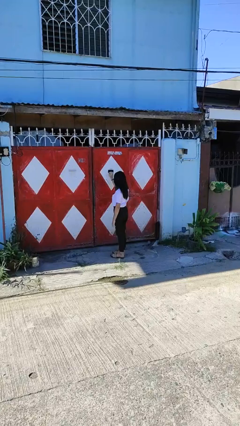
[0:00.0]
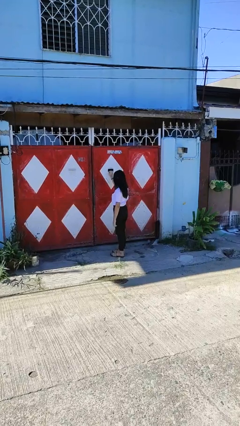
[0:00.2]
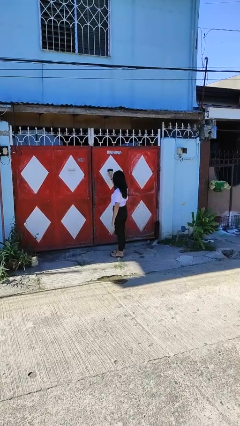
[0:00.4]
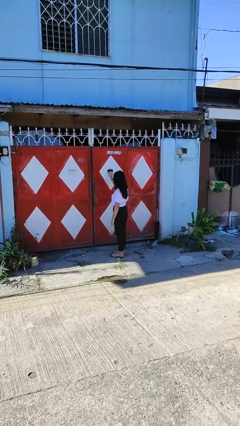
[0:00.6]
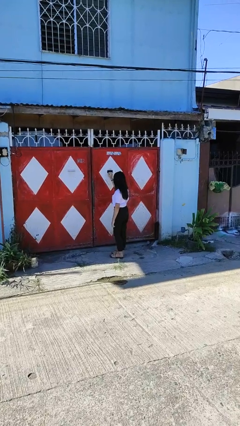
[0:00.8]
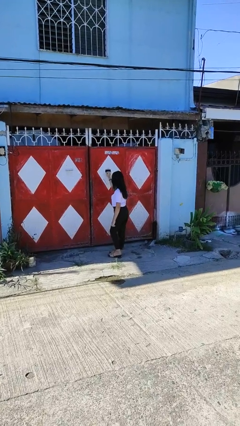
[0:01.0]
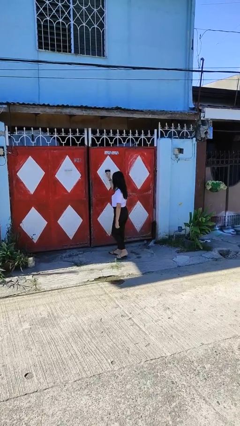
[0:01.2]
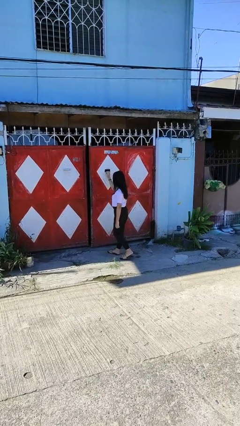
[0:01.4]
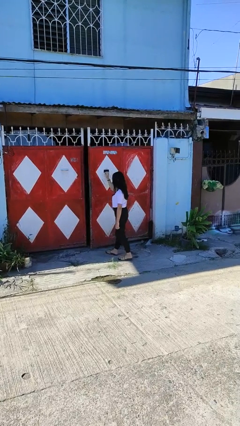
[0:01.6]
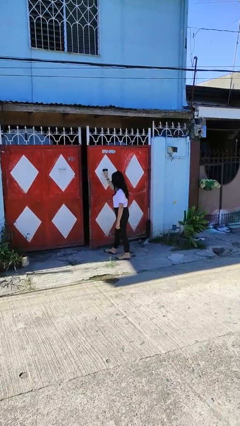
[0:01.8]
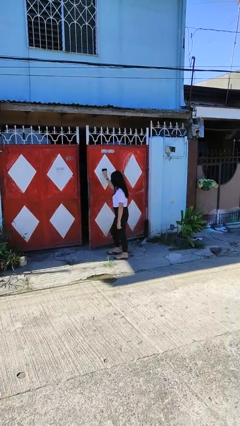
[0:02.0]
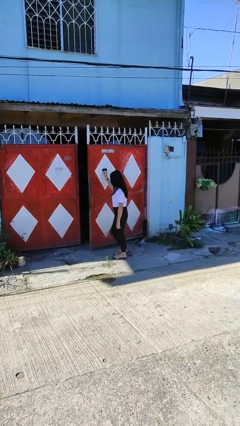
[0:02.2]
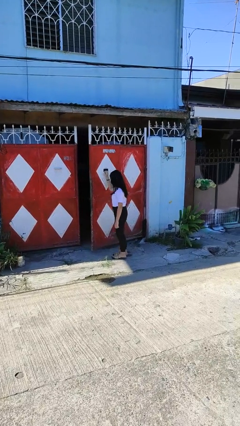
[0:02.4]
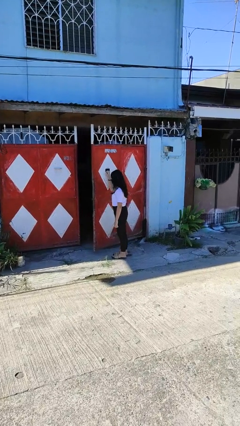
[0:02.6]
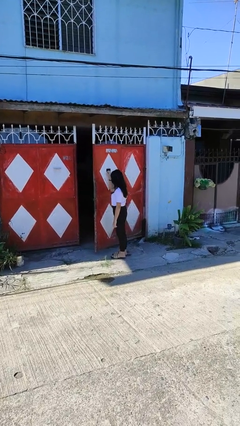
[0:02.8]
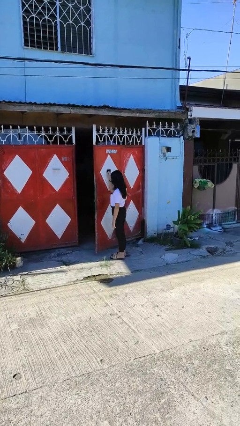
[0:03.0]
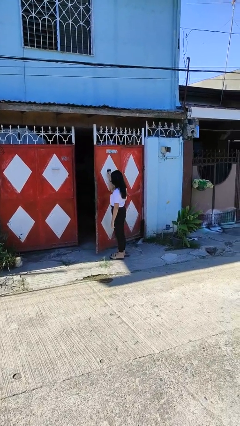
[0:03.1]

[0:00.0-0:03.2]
person opens gate

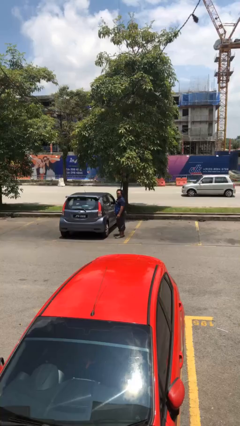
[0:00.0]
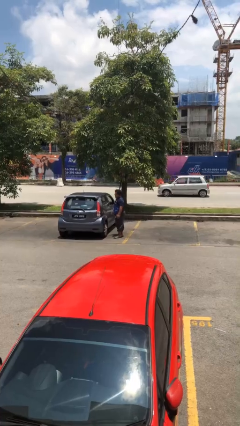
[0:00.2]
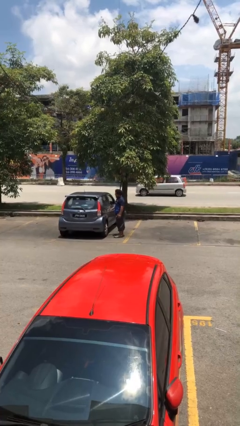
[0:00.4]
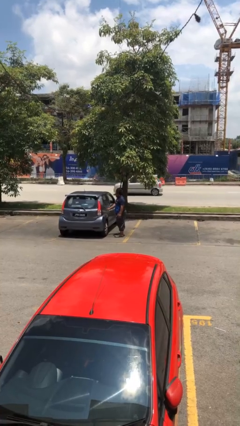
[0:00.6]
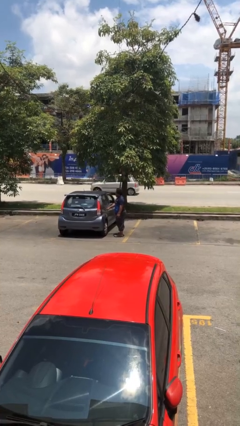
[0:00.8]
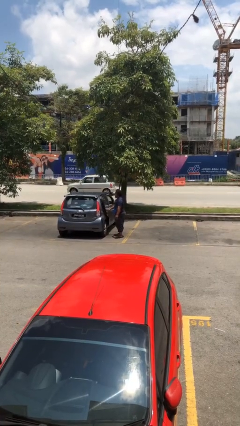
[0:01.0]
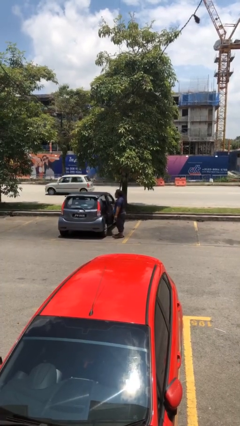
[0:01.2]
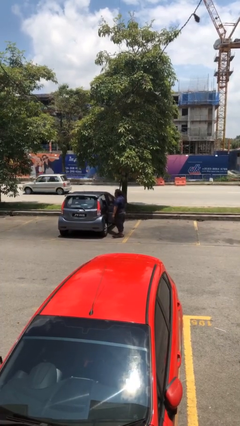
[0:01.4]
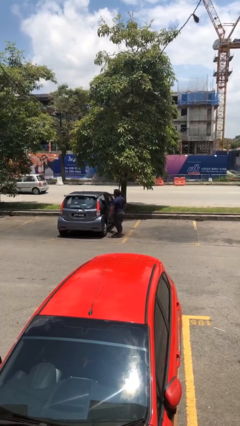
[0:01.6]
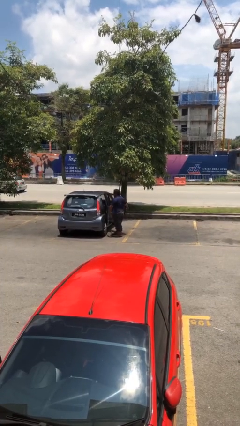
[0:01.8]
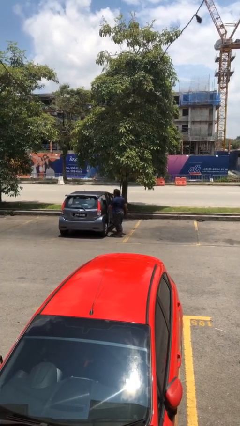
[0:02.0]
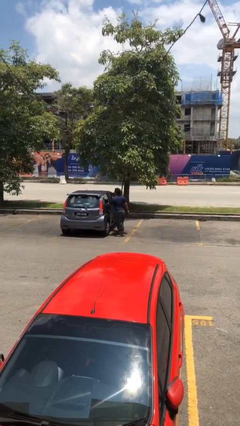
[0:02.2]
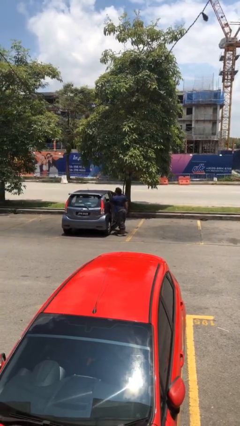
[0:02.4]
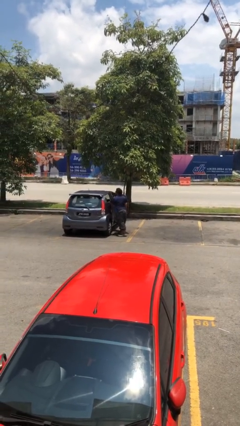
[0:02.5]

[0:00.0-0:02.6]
person opens car door

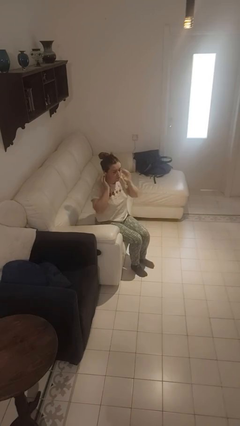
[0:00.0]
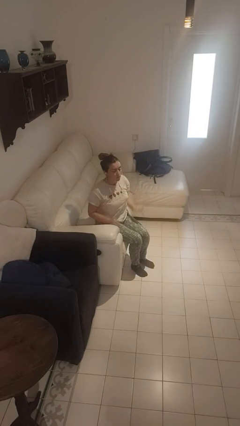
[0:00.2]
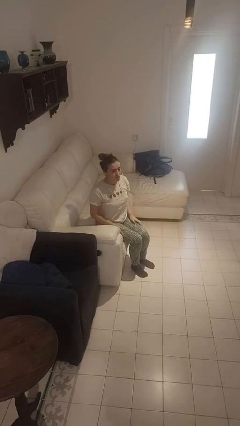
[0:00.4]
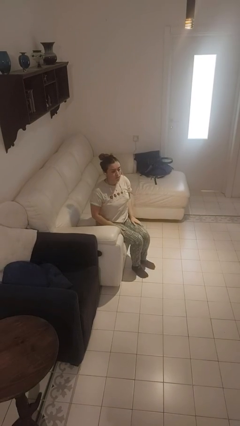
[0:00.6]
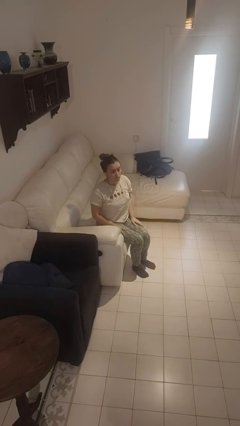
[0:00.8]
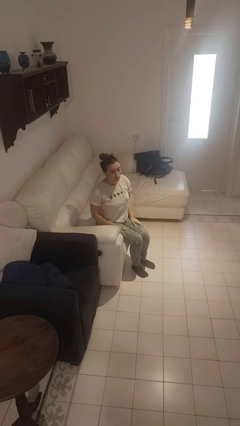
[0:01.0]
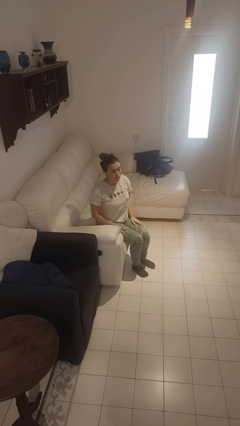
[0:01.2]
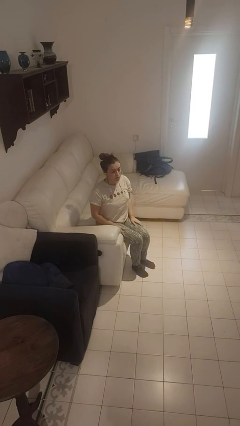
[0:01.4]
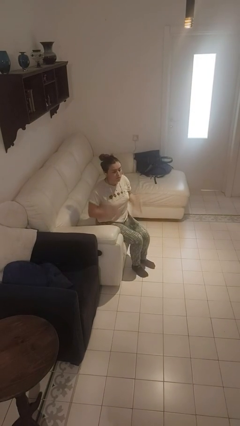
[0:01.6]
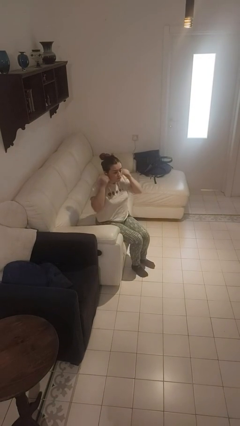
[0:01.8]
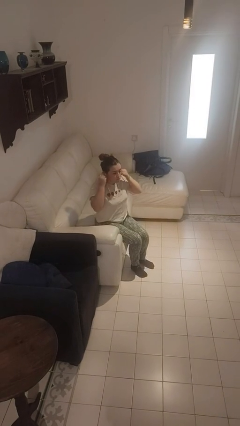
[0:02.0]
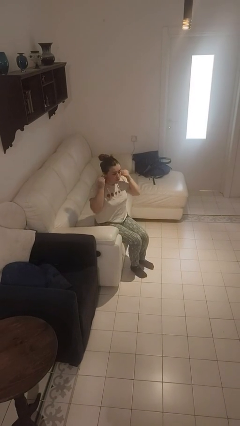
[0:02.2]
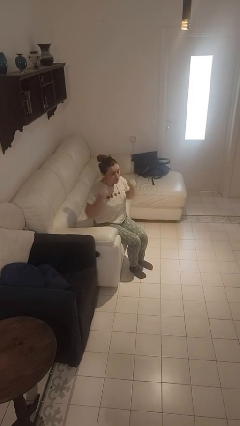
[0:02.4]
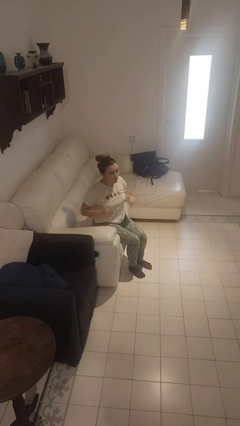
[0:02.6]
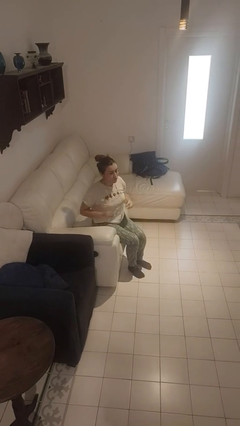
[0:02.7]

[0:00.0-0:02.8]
person takes off headphones

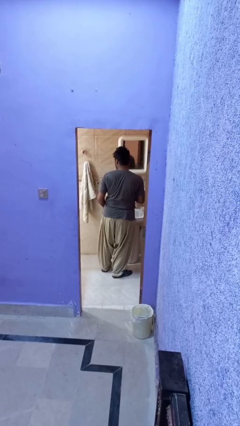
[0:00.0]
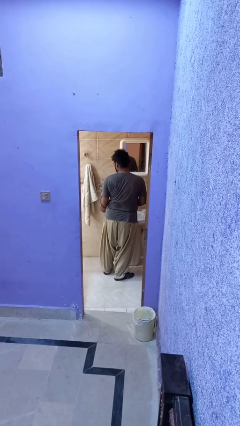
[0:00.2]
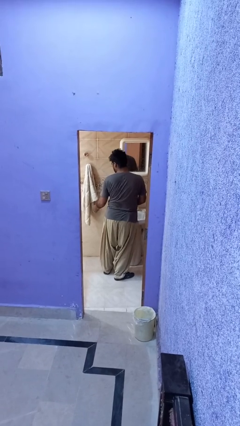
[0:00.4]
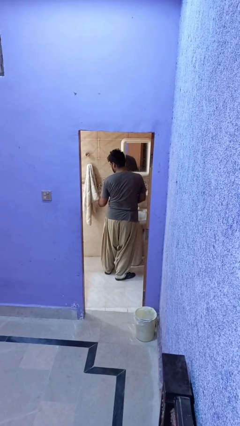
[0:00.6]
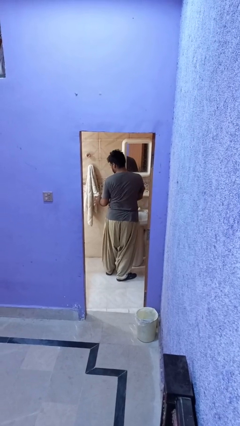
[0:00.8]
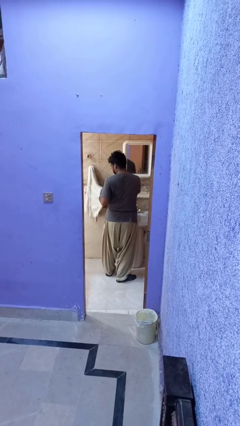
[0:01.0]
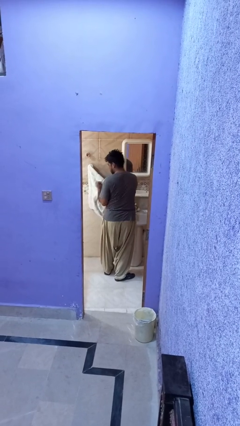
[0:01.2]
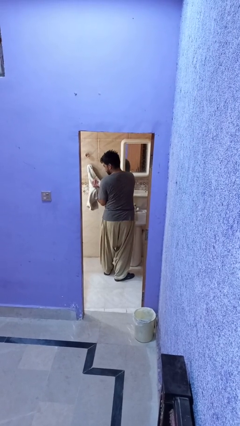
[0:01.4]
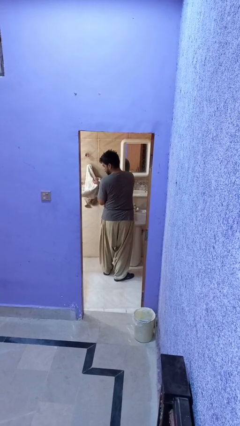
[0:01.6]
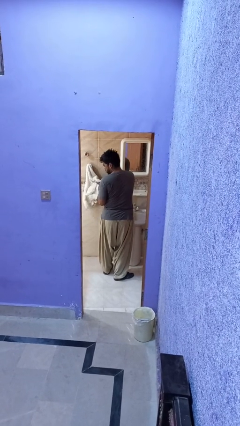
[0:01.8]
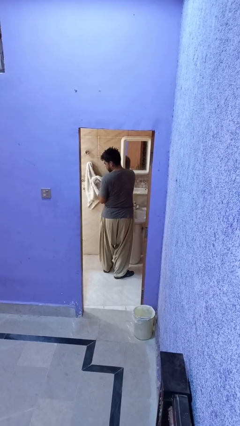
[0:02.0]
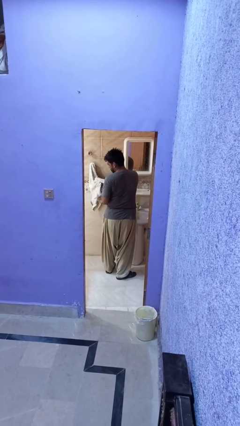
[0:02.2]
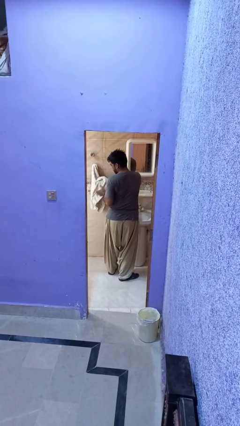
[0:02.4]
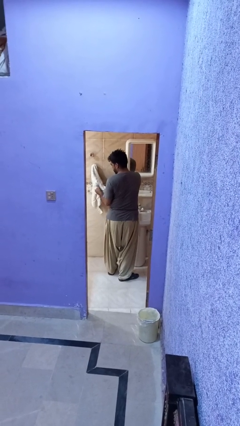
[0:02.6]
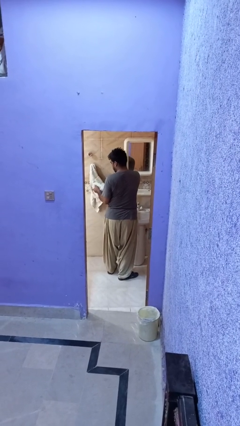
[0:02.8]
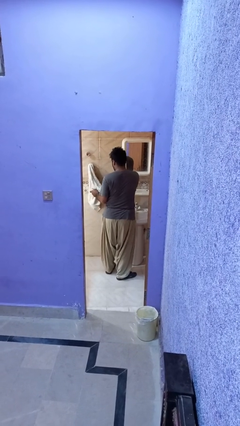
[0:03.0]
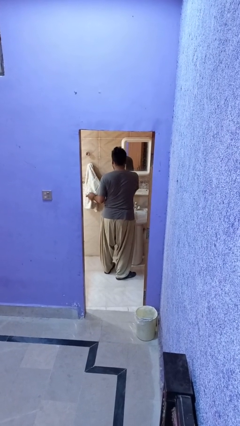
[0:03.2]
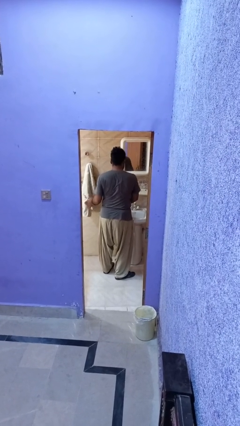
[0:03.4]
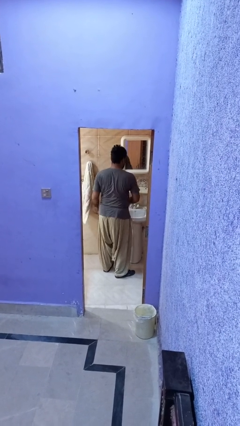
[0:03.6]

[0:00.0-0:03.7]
person dries hands with towel

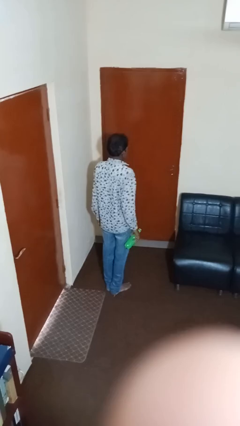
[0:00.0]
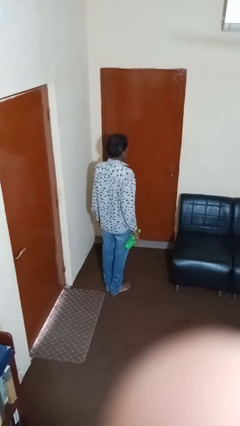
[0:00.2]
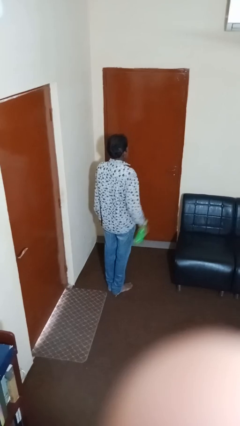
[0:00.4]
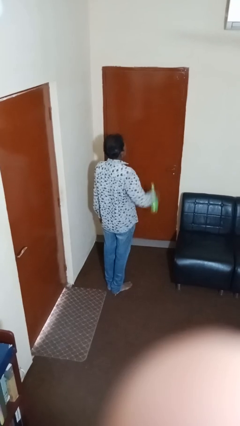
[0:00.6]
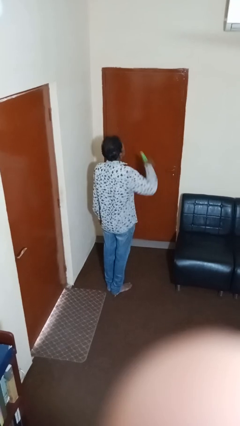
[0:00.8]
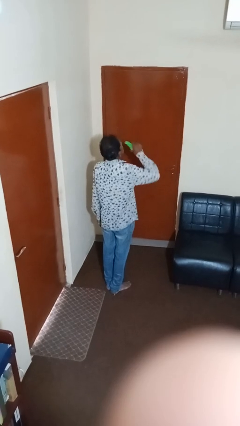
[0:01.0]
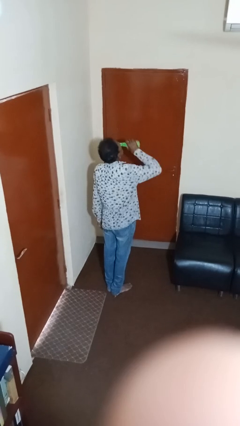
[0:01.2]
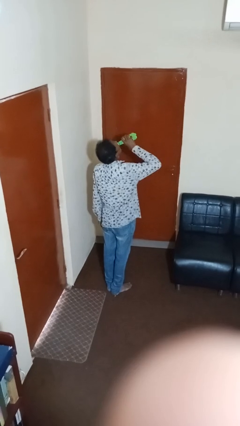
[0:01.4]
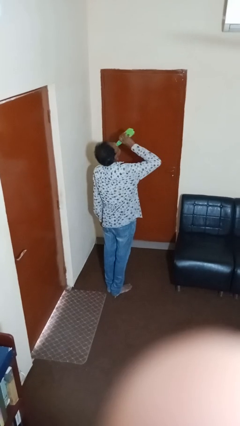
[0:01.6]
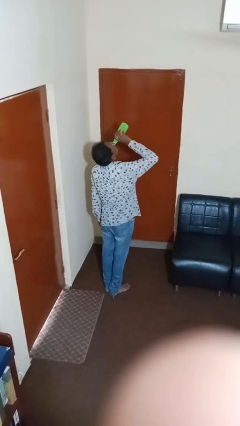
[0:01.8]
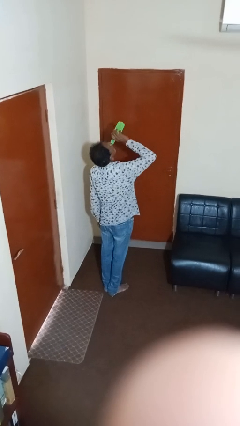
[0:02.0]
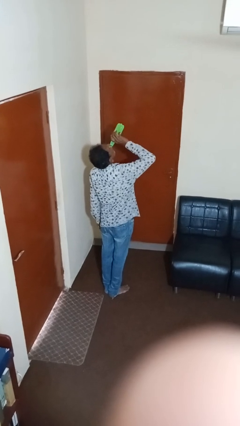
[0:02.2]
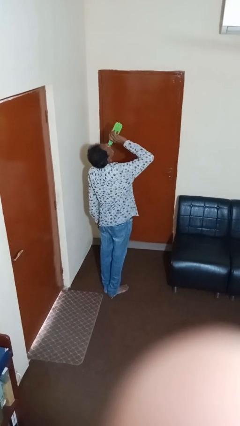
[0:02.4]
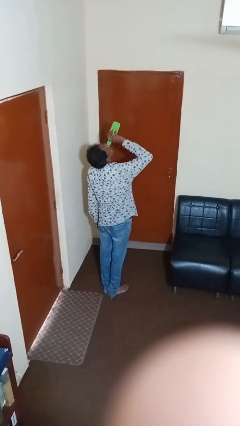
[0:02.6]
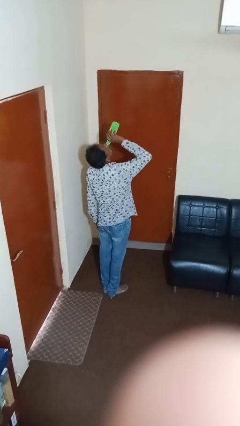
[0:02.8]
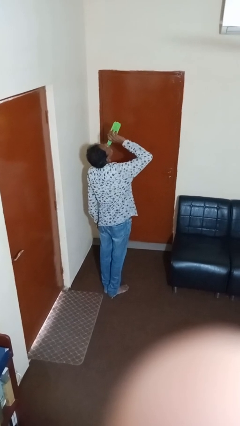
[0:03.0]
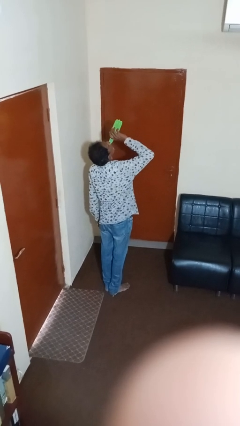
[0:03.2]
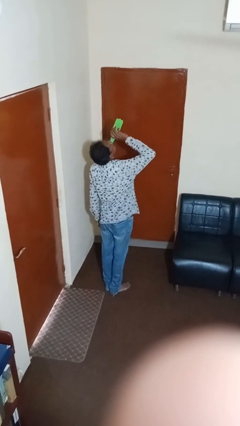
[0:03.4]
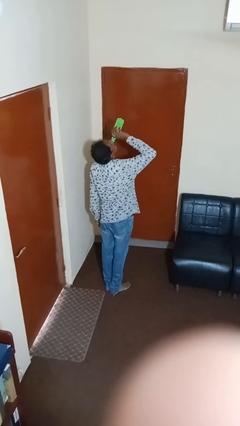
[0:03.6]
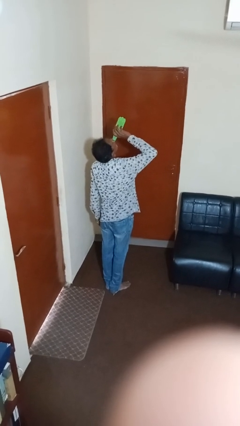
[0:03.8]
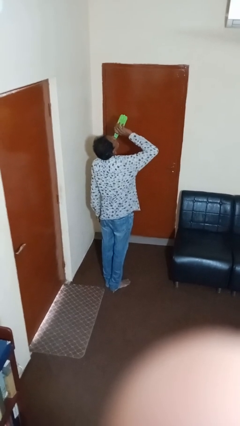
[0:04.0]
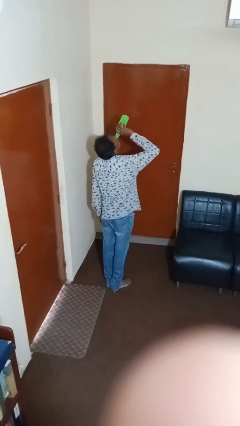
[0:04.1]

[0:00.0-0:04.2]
person drinks from bottle

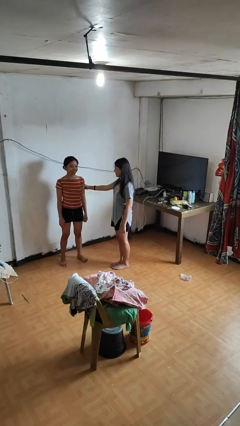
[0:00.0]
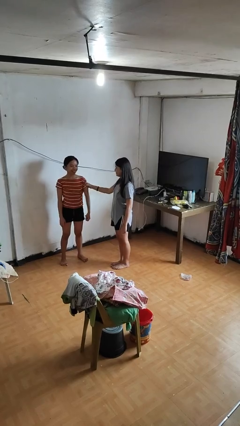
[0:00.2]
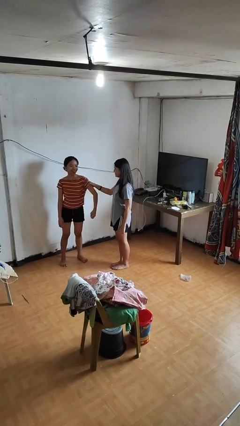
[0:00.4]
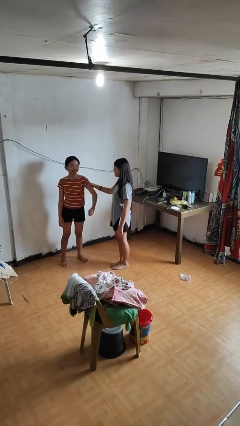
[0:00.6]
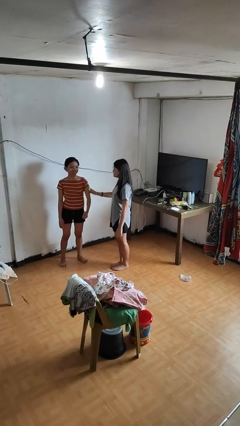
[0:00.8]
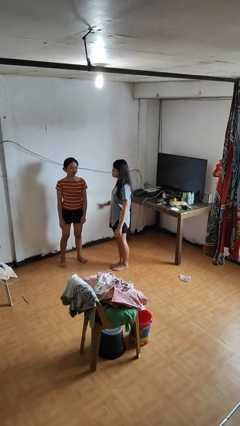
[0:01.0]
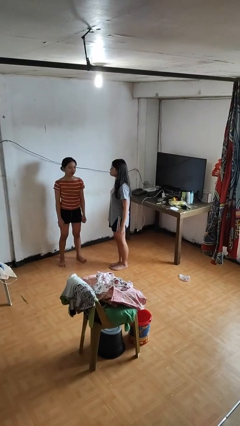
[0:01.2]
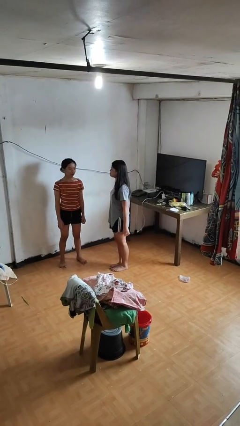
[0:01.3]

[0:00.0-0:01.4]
person grabs person by bicep
